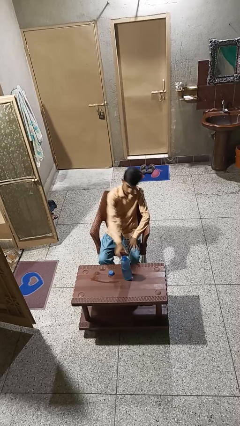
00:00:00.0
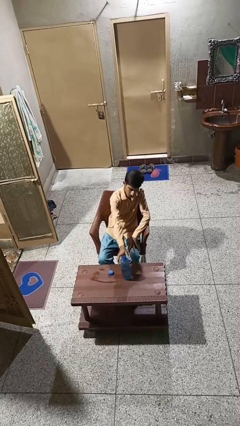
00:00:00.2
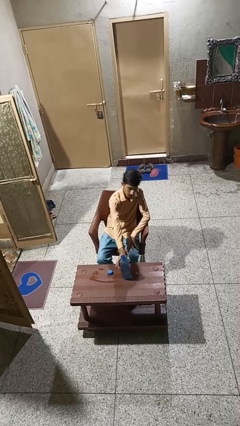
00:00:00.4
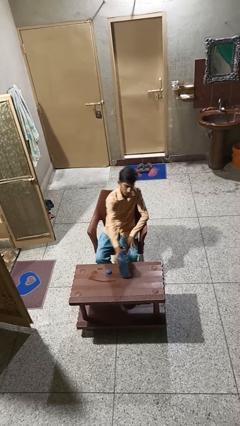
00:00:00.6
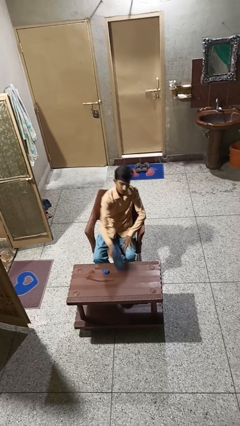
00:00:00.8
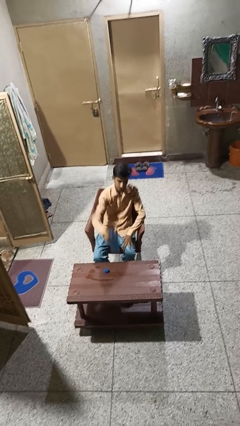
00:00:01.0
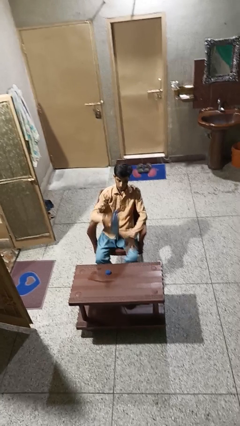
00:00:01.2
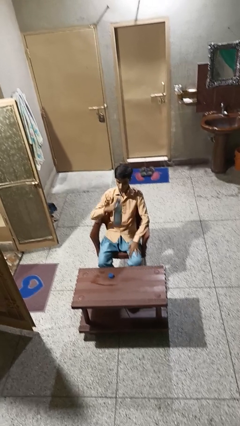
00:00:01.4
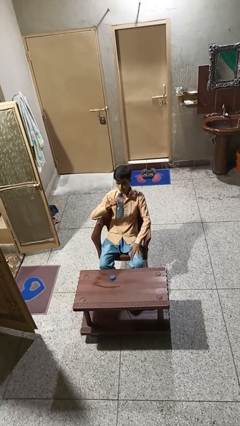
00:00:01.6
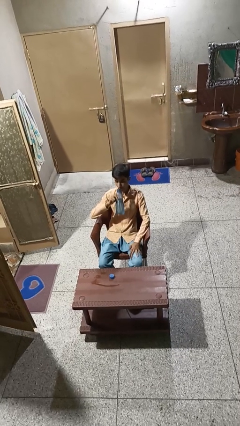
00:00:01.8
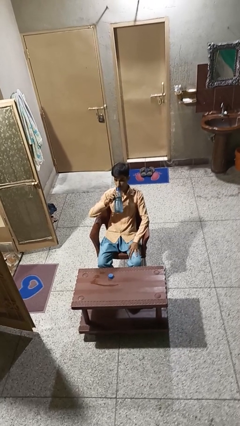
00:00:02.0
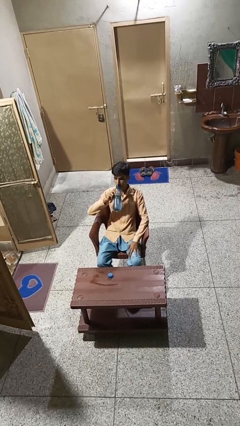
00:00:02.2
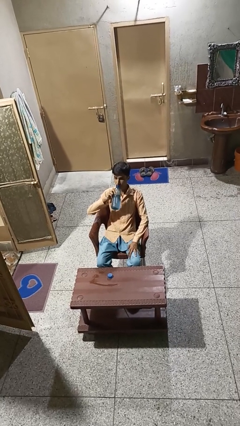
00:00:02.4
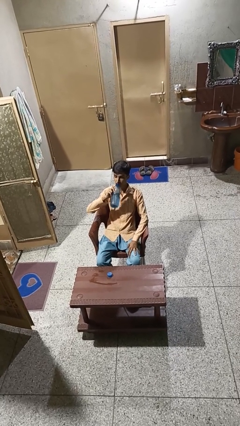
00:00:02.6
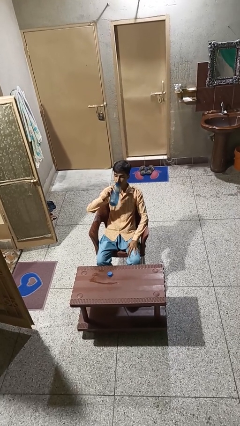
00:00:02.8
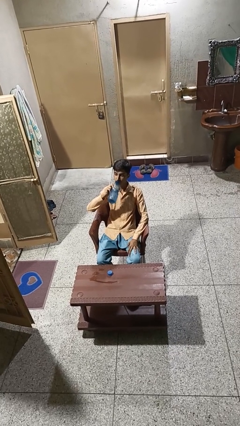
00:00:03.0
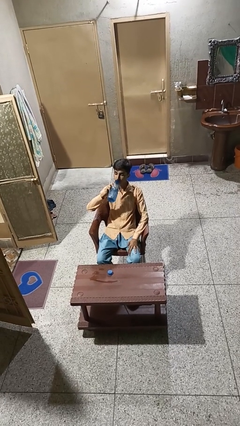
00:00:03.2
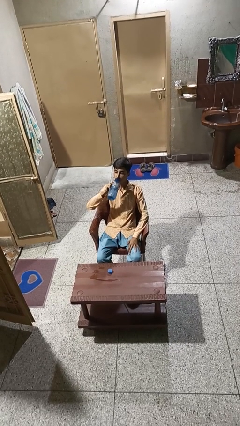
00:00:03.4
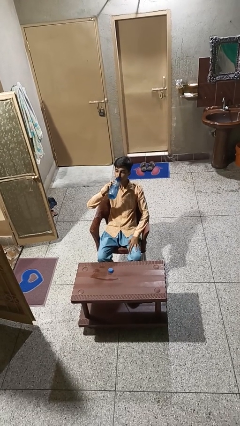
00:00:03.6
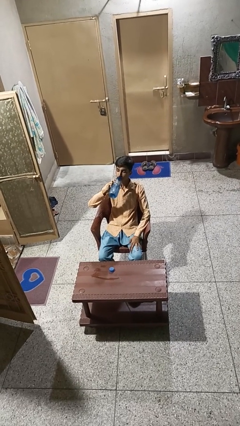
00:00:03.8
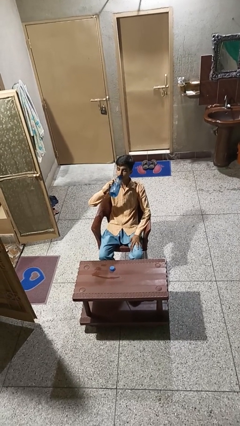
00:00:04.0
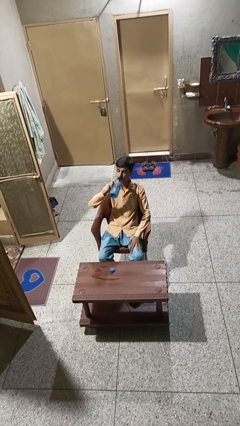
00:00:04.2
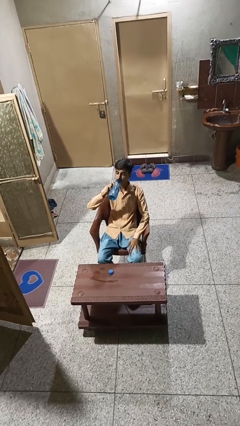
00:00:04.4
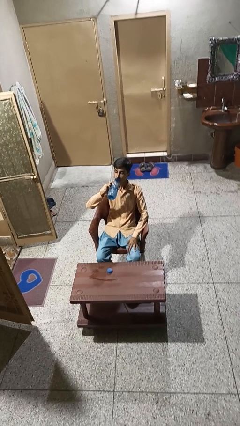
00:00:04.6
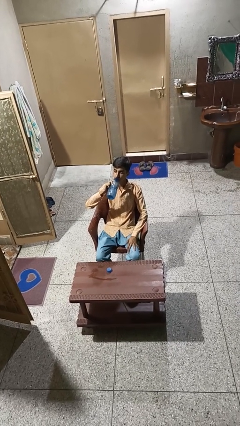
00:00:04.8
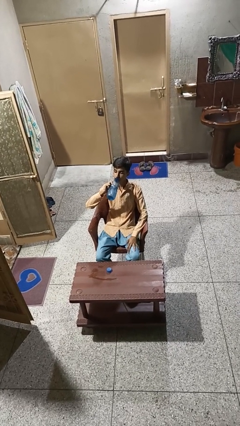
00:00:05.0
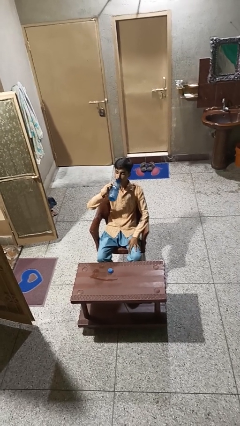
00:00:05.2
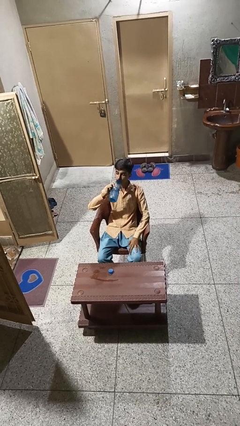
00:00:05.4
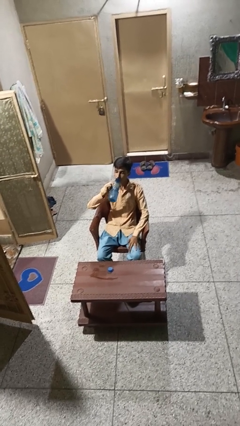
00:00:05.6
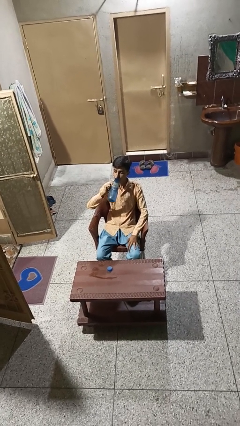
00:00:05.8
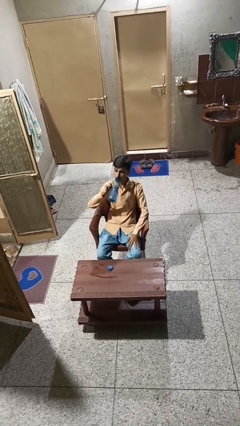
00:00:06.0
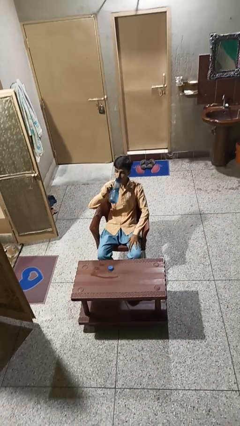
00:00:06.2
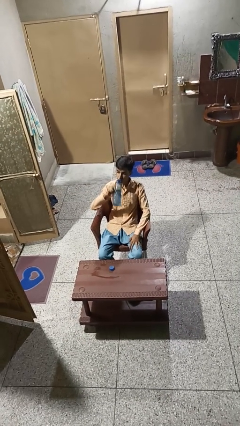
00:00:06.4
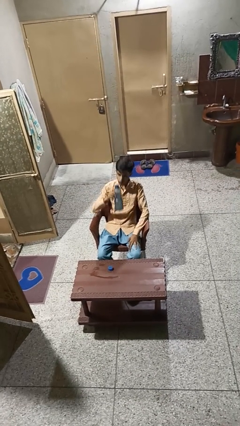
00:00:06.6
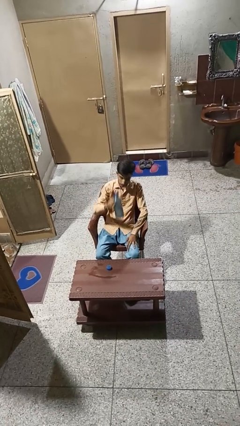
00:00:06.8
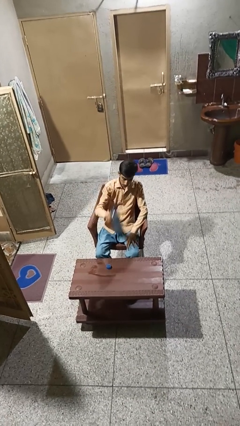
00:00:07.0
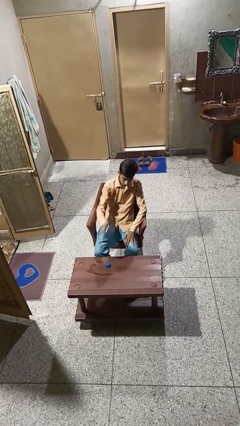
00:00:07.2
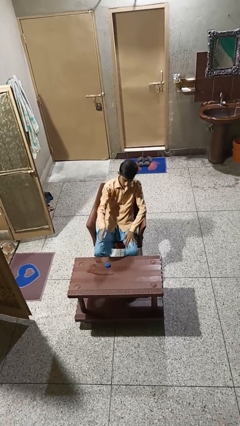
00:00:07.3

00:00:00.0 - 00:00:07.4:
person drinks from bottle

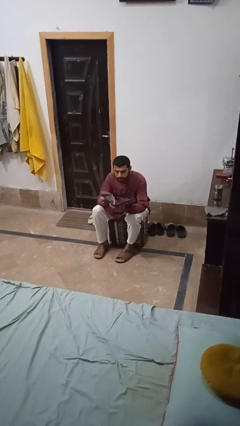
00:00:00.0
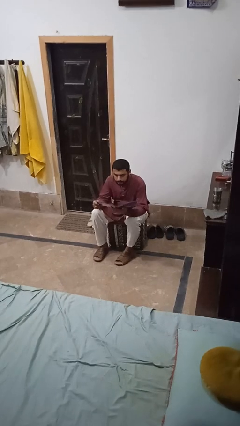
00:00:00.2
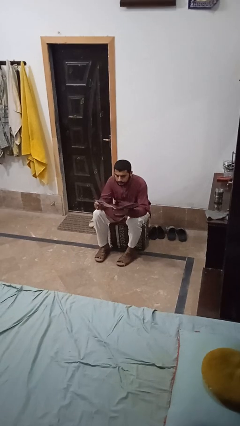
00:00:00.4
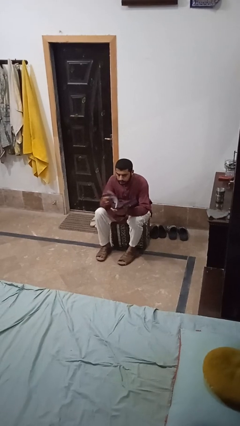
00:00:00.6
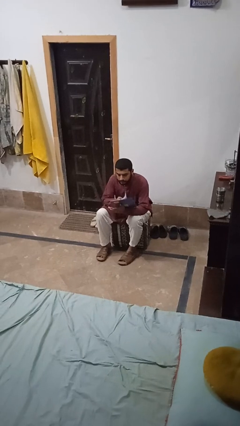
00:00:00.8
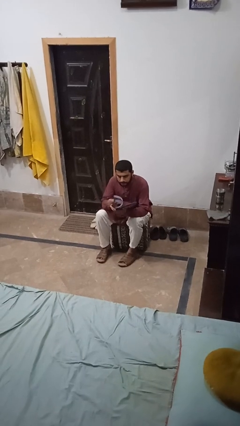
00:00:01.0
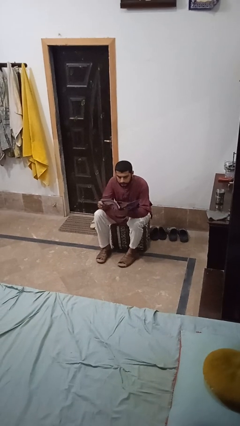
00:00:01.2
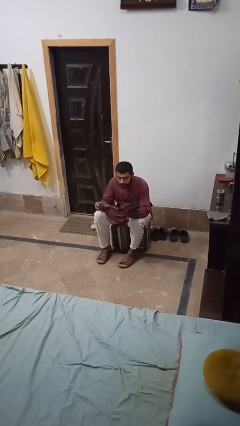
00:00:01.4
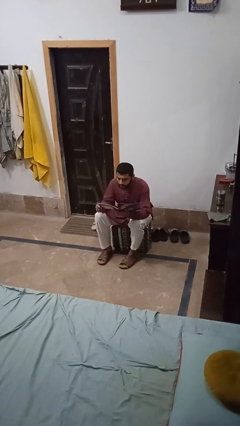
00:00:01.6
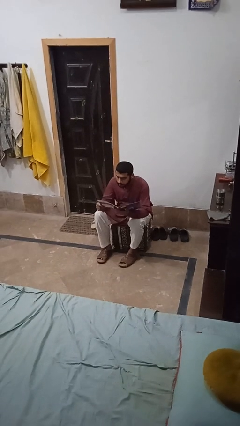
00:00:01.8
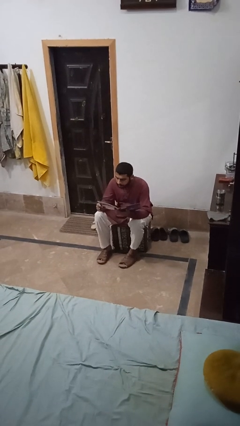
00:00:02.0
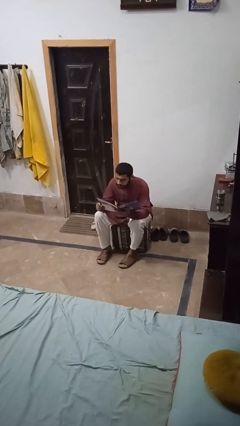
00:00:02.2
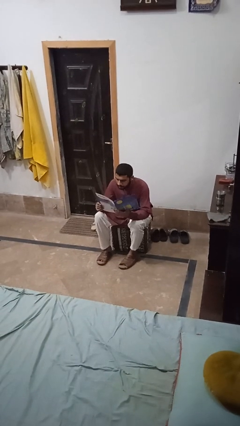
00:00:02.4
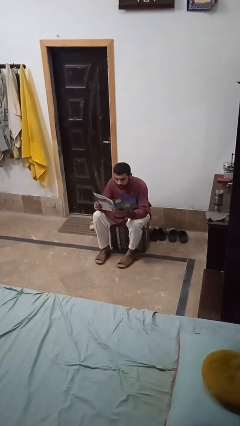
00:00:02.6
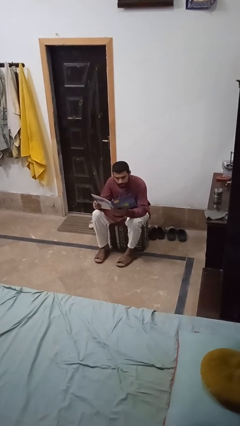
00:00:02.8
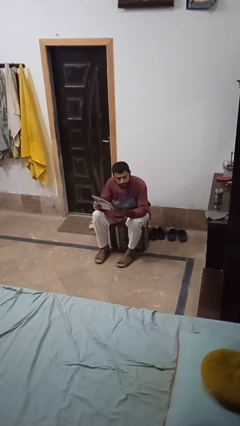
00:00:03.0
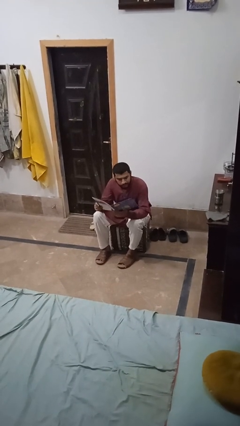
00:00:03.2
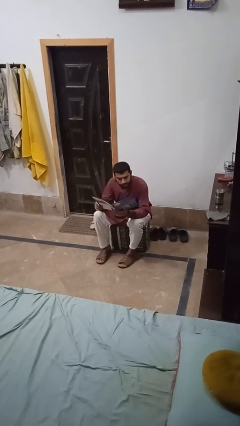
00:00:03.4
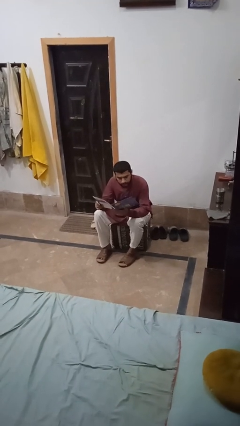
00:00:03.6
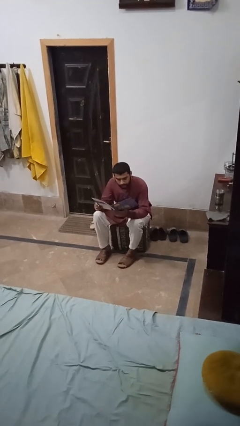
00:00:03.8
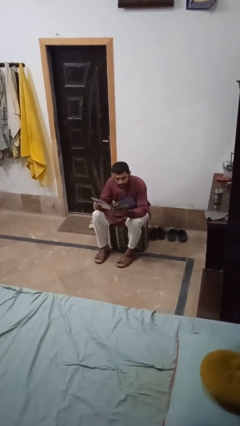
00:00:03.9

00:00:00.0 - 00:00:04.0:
person reads magazine

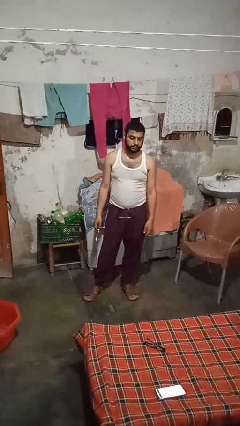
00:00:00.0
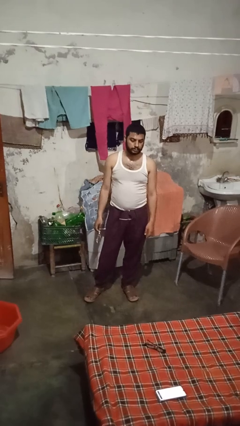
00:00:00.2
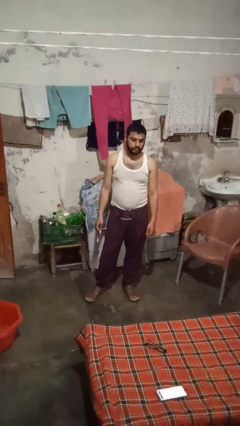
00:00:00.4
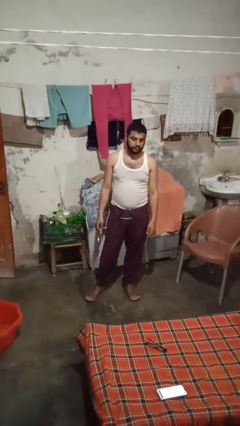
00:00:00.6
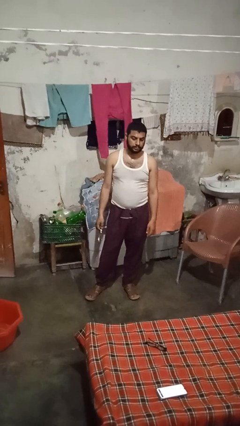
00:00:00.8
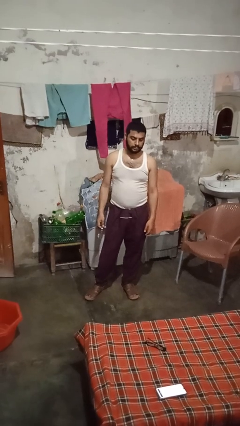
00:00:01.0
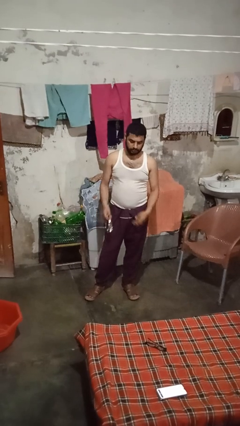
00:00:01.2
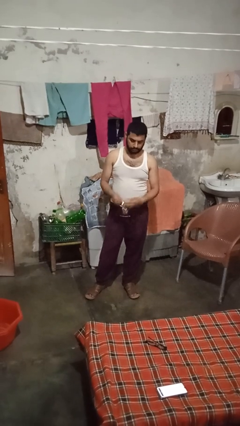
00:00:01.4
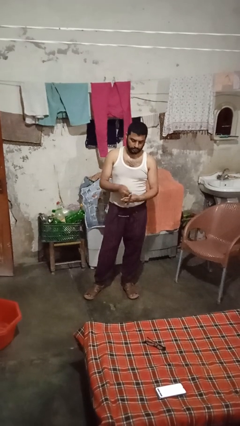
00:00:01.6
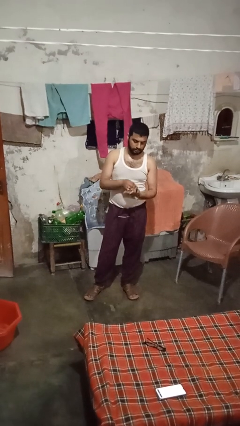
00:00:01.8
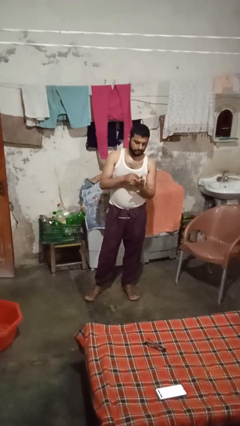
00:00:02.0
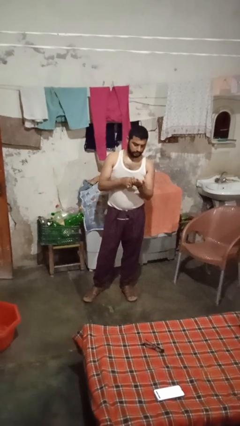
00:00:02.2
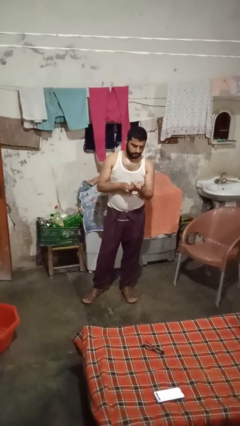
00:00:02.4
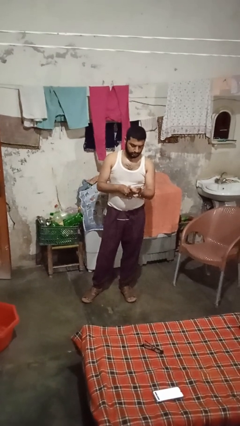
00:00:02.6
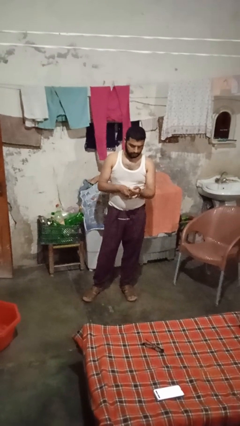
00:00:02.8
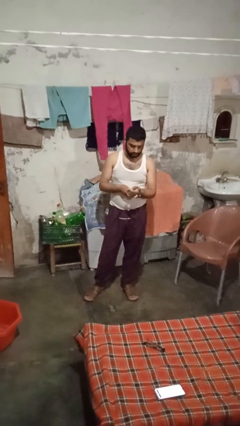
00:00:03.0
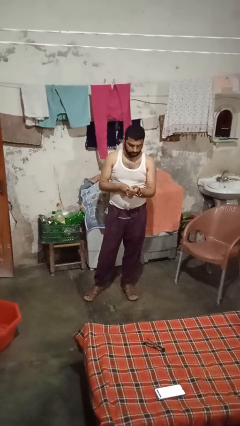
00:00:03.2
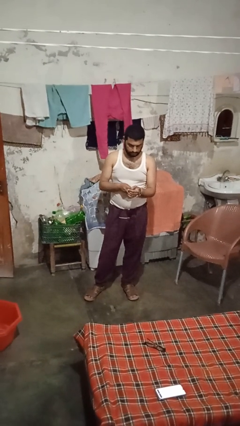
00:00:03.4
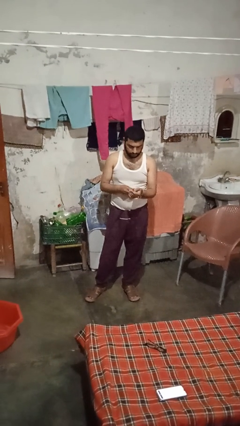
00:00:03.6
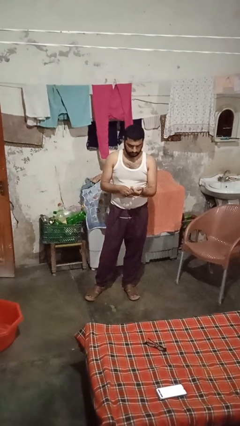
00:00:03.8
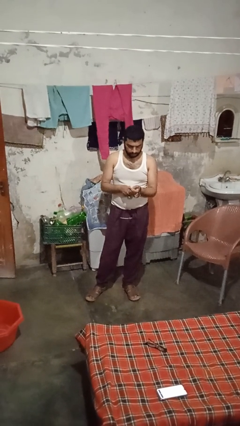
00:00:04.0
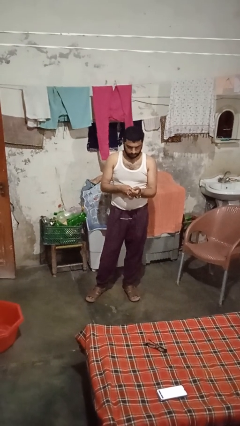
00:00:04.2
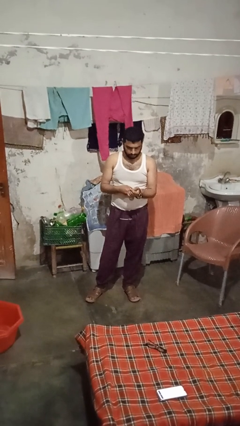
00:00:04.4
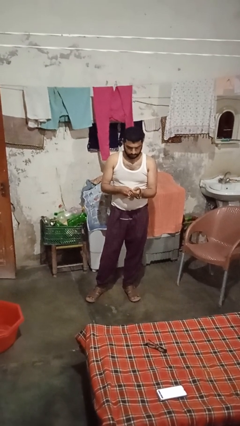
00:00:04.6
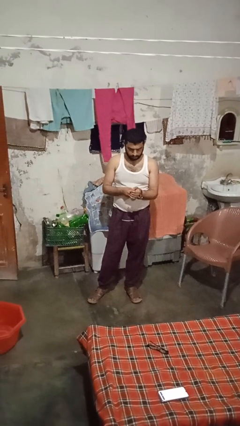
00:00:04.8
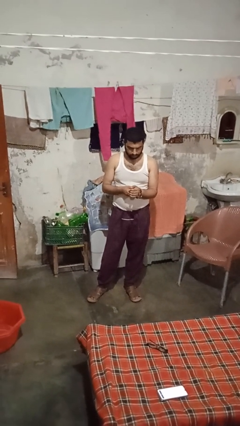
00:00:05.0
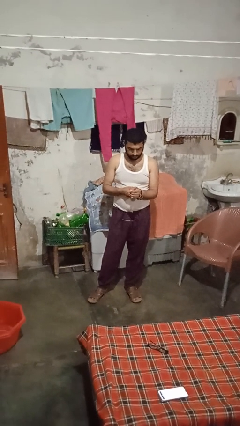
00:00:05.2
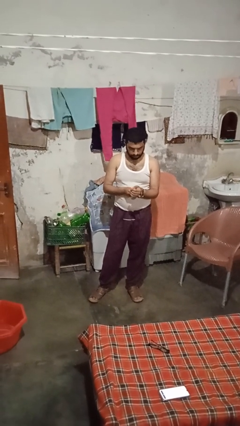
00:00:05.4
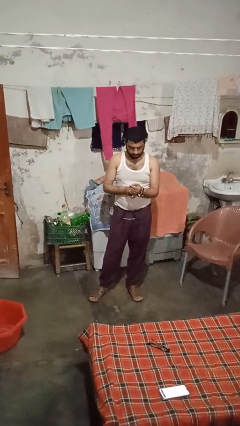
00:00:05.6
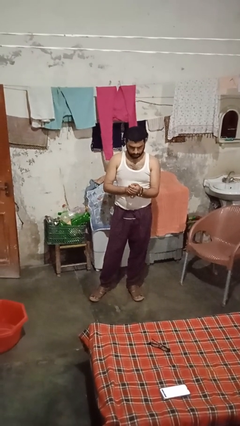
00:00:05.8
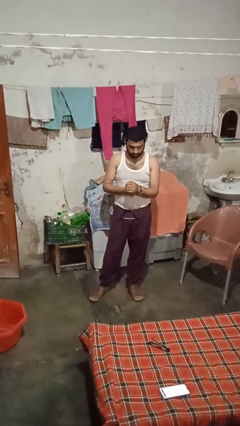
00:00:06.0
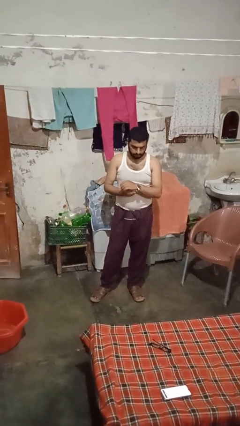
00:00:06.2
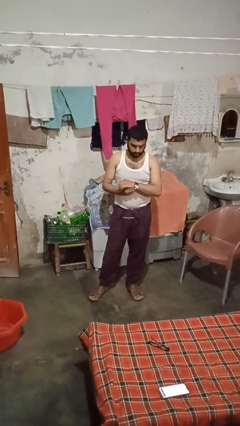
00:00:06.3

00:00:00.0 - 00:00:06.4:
person puts on wristwatch
